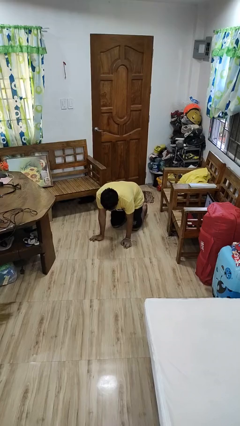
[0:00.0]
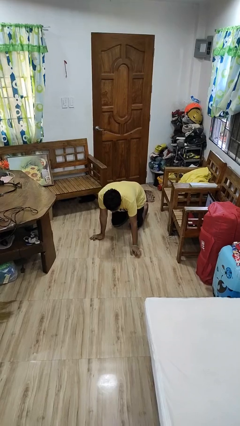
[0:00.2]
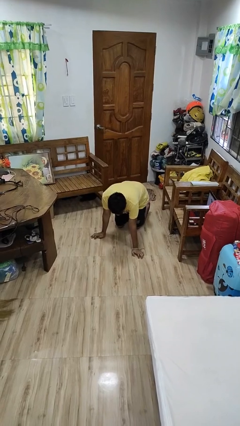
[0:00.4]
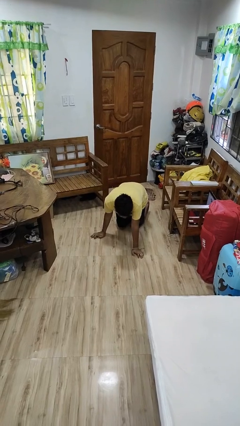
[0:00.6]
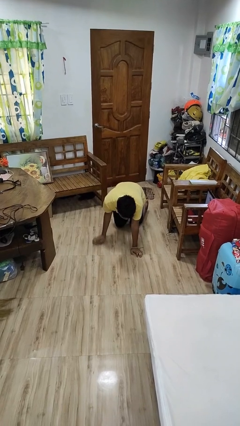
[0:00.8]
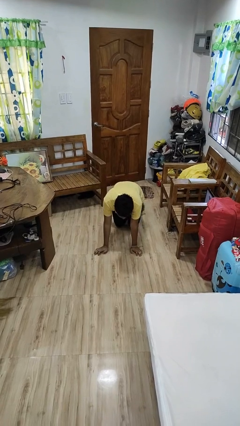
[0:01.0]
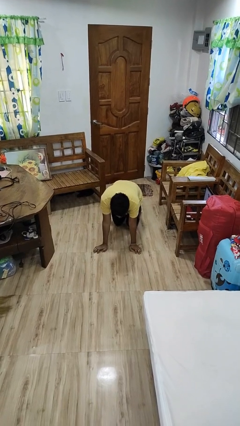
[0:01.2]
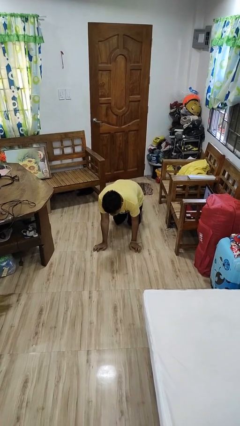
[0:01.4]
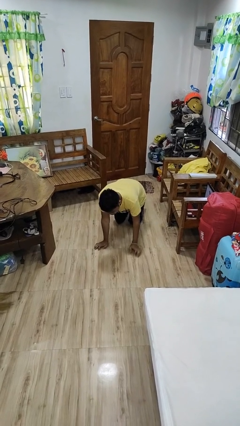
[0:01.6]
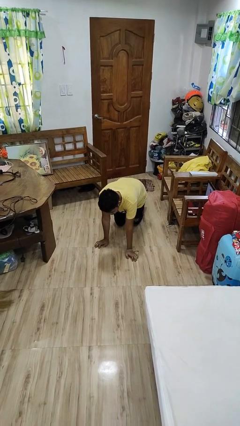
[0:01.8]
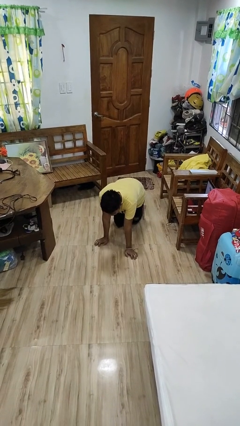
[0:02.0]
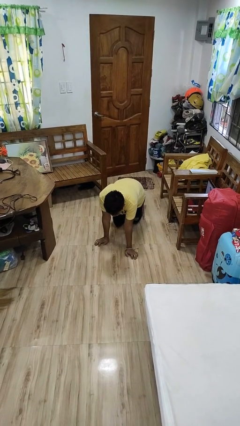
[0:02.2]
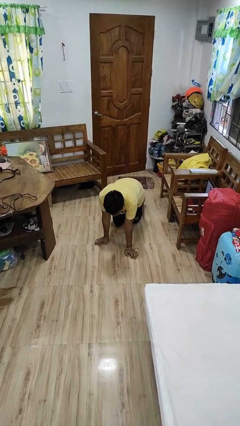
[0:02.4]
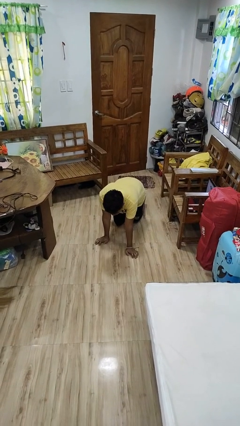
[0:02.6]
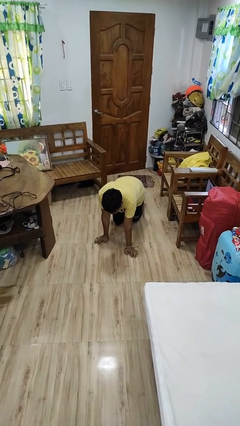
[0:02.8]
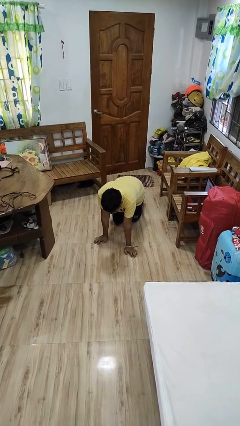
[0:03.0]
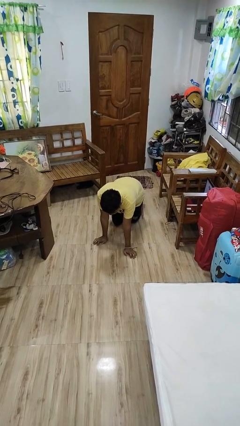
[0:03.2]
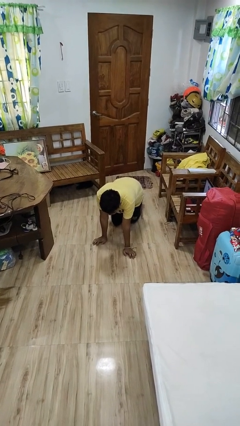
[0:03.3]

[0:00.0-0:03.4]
person crawls

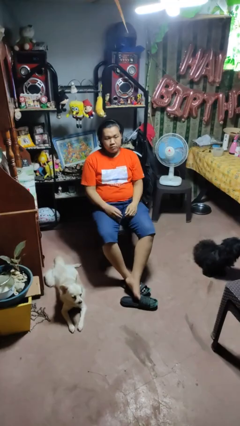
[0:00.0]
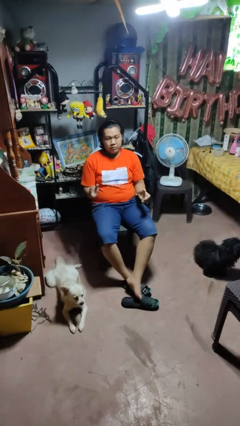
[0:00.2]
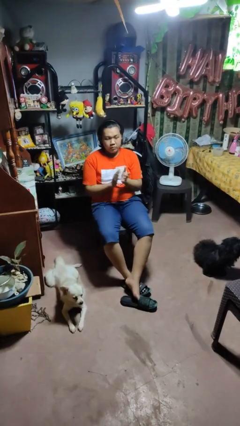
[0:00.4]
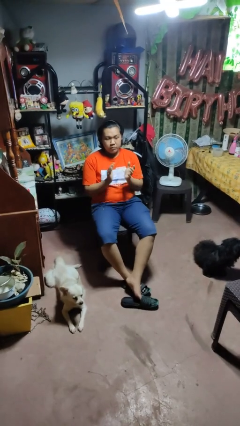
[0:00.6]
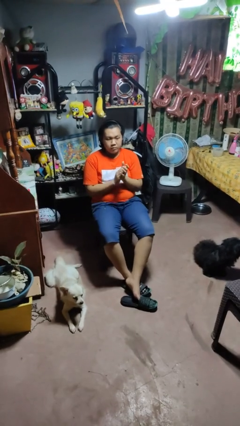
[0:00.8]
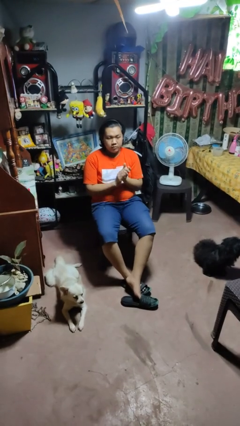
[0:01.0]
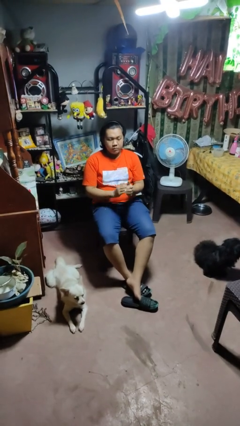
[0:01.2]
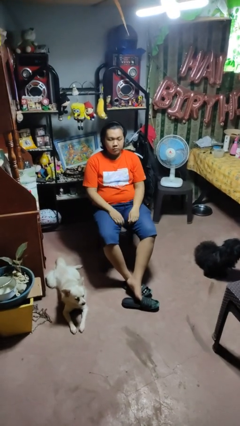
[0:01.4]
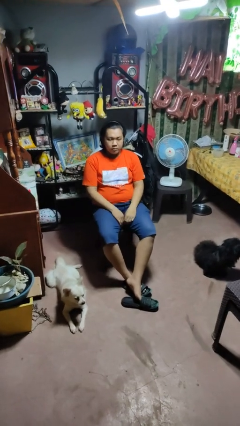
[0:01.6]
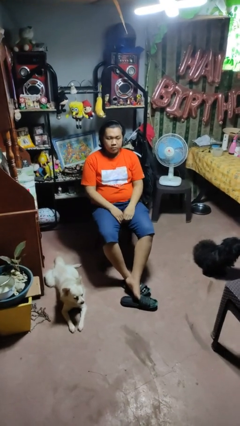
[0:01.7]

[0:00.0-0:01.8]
person claps hands

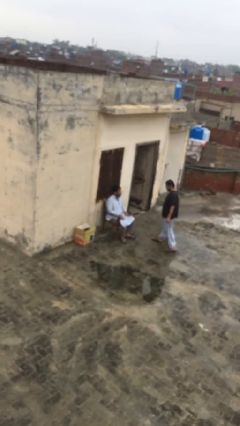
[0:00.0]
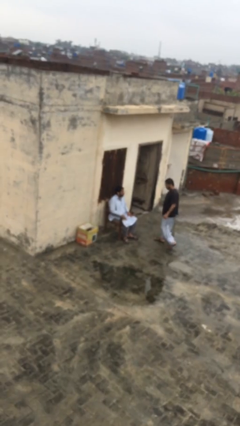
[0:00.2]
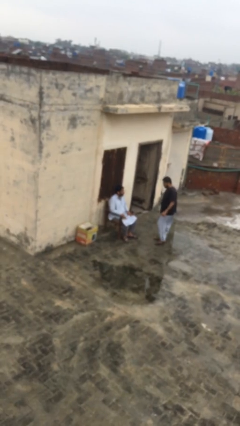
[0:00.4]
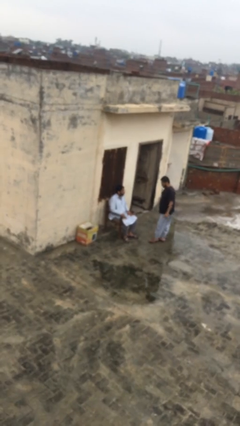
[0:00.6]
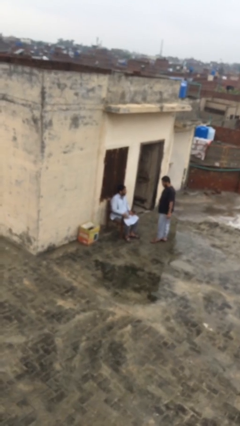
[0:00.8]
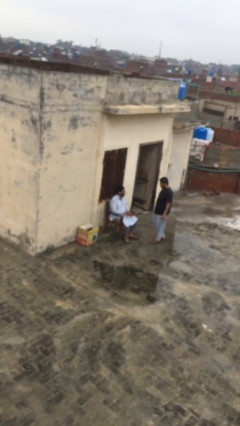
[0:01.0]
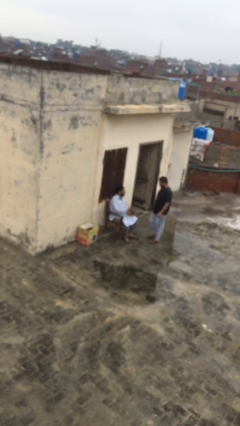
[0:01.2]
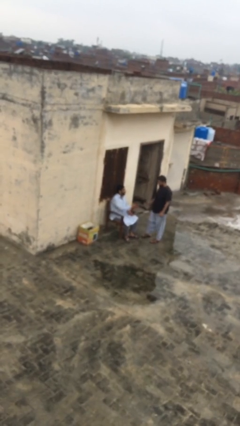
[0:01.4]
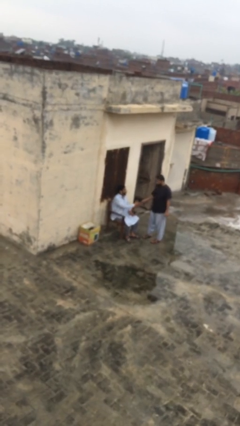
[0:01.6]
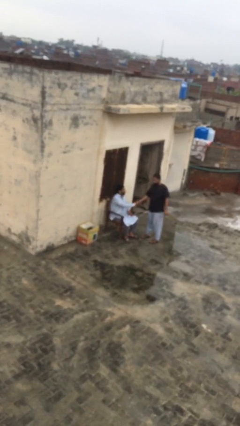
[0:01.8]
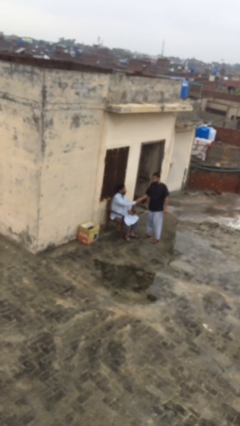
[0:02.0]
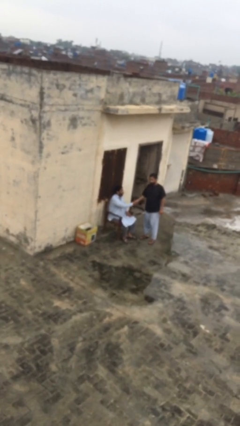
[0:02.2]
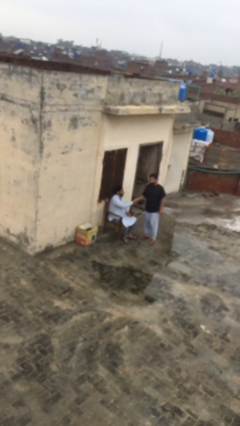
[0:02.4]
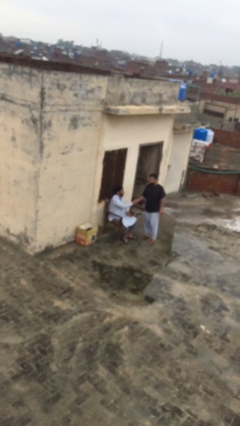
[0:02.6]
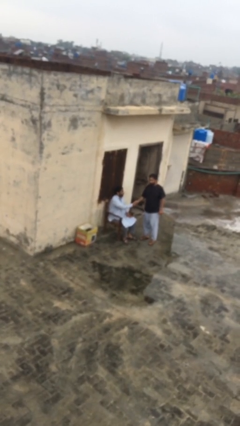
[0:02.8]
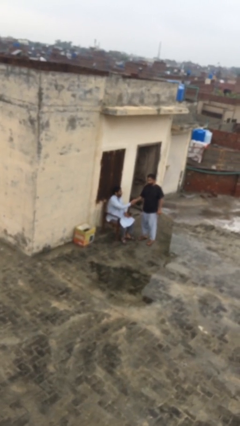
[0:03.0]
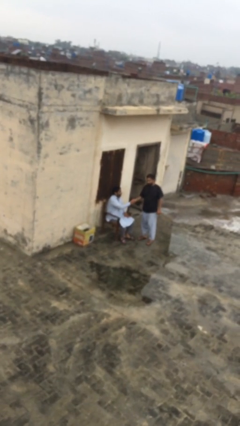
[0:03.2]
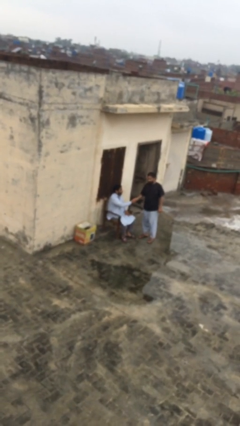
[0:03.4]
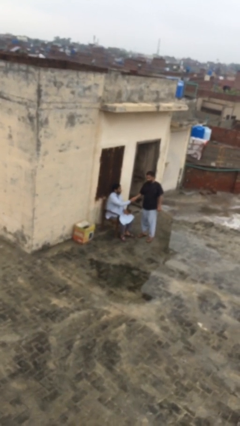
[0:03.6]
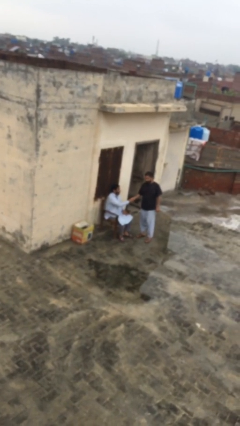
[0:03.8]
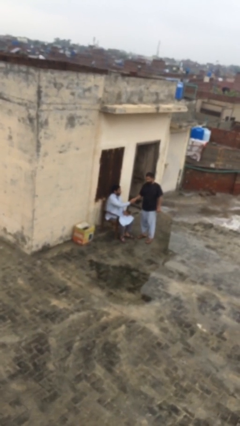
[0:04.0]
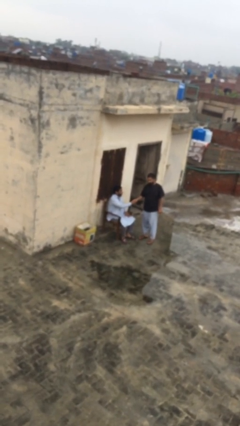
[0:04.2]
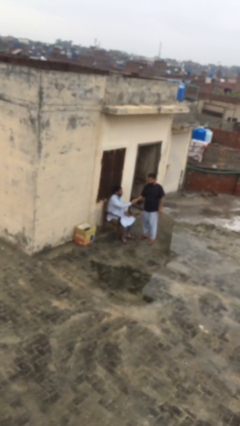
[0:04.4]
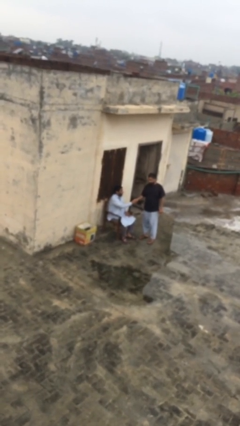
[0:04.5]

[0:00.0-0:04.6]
person shakes hand

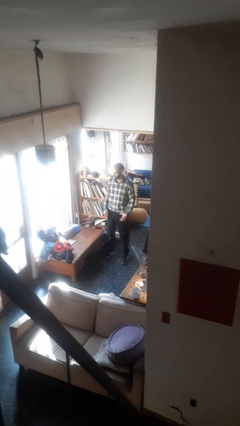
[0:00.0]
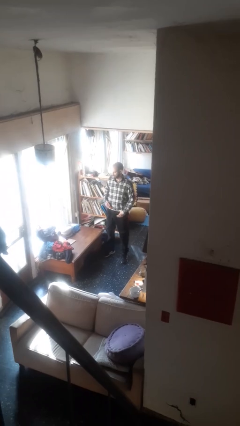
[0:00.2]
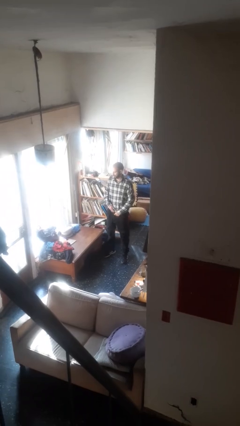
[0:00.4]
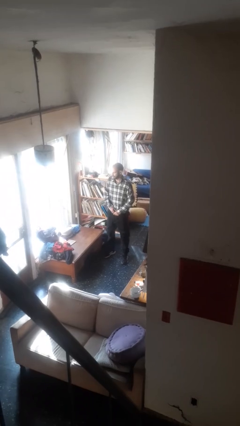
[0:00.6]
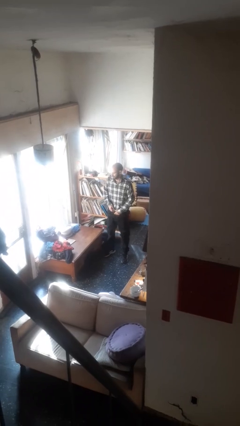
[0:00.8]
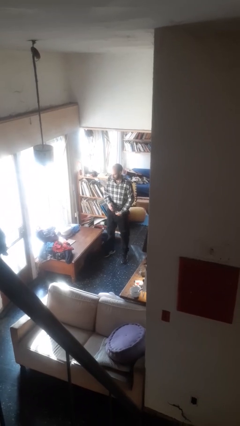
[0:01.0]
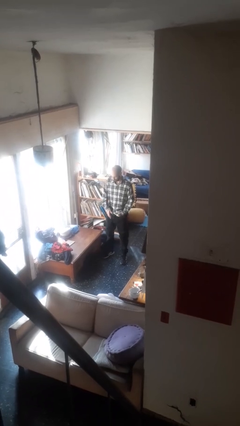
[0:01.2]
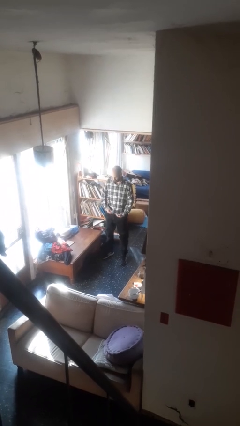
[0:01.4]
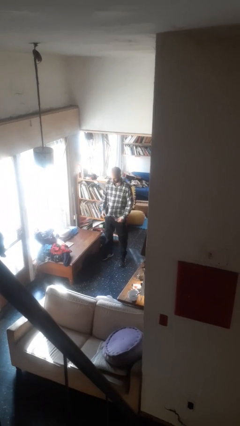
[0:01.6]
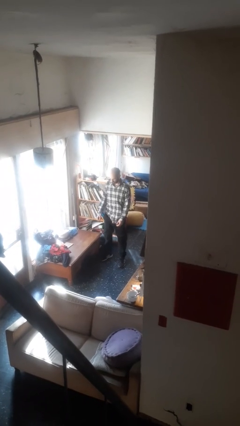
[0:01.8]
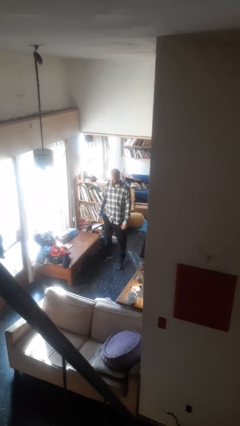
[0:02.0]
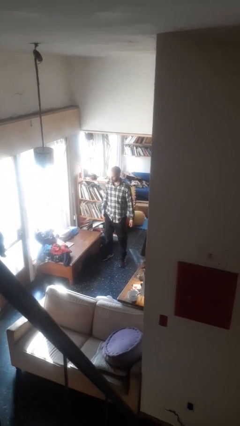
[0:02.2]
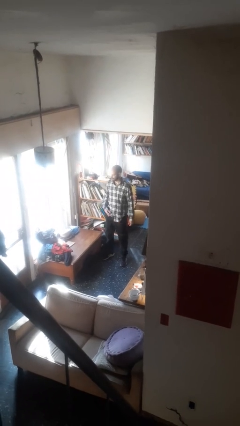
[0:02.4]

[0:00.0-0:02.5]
person untucks shirt

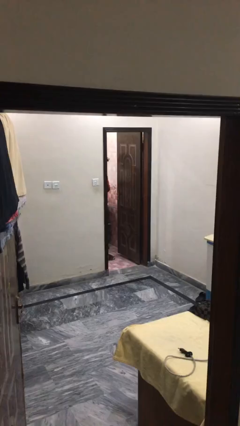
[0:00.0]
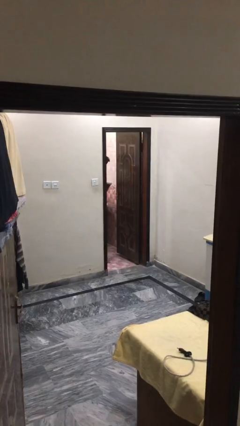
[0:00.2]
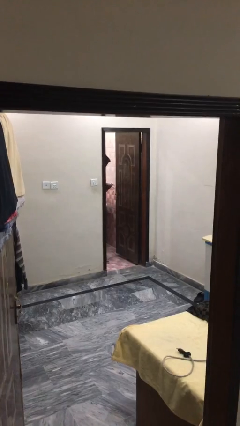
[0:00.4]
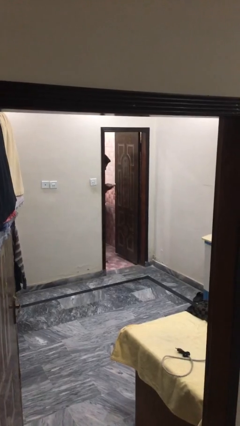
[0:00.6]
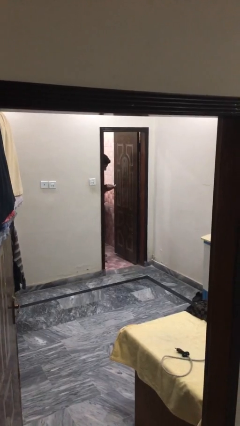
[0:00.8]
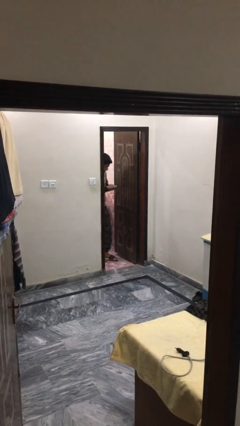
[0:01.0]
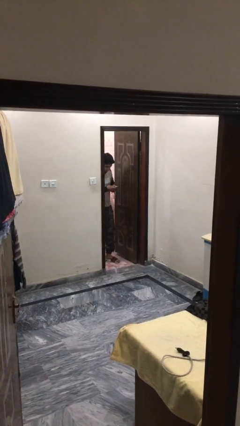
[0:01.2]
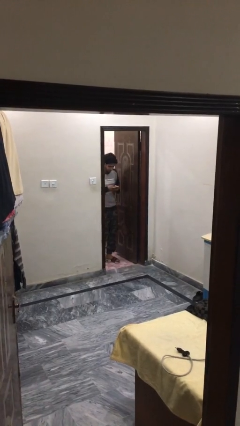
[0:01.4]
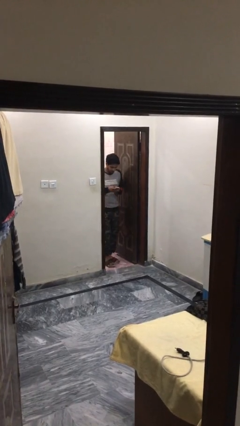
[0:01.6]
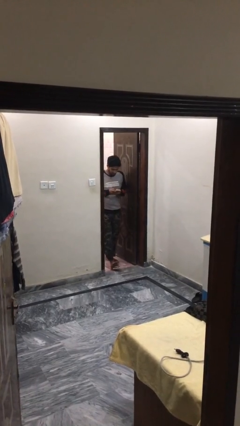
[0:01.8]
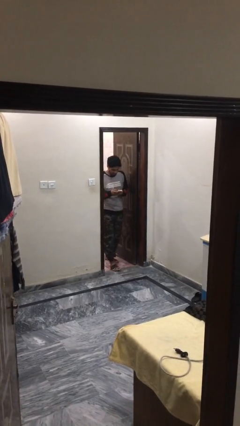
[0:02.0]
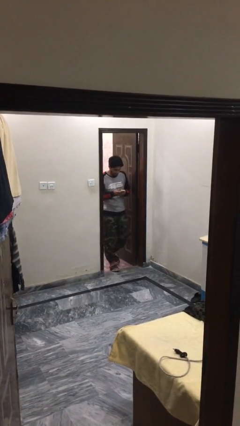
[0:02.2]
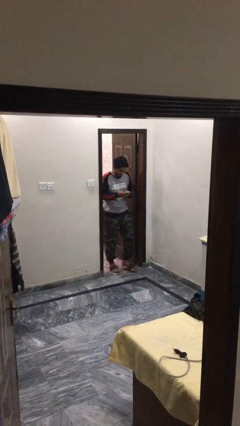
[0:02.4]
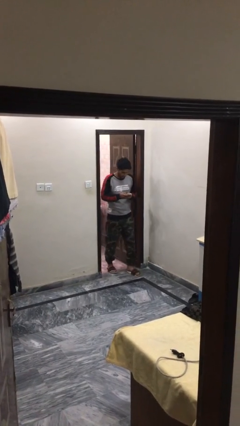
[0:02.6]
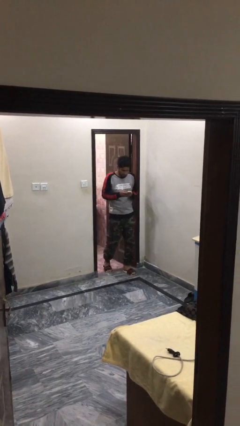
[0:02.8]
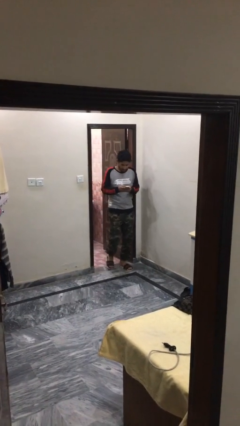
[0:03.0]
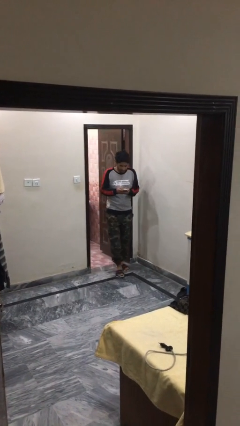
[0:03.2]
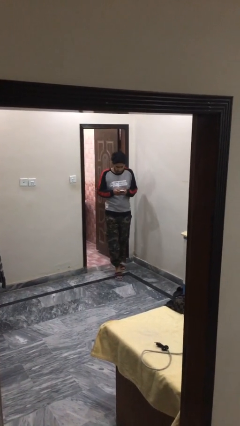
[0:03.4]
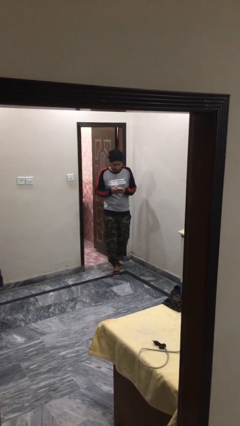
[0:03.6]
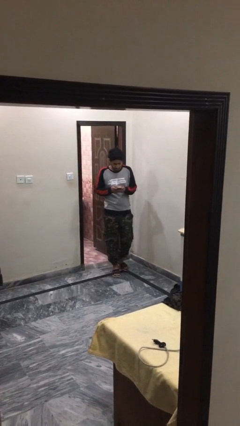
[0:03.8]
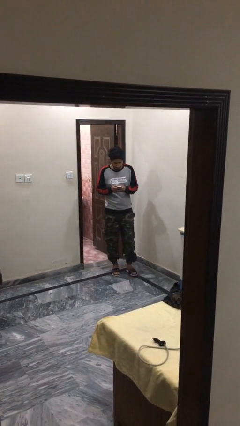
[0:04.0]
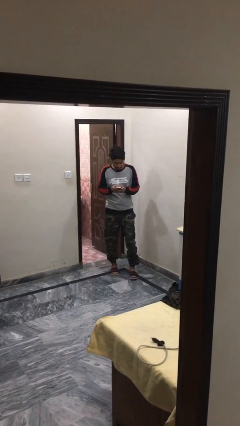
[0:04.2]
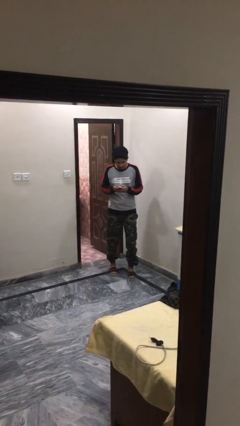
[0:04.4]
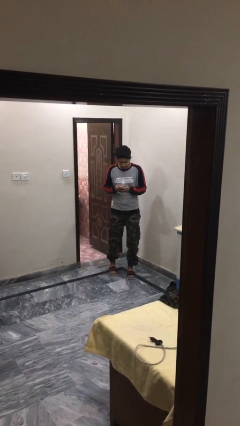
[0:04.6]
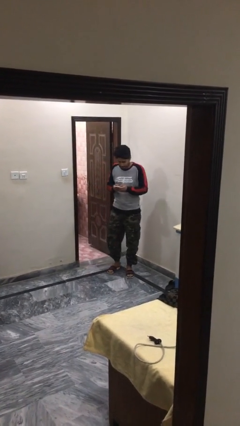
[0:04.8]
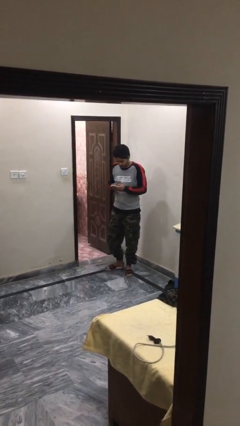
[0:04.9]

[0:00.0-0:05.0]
person exits scene through structure

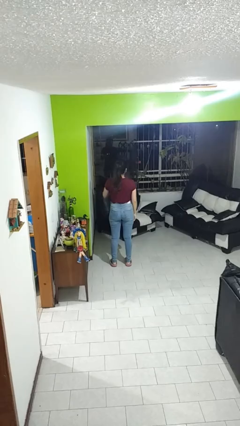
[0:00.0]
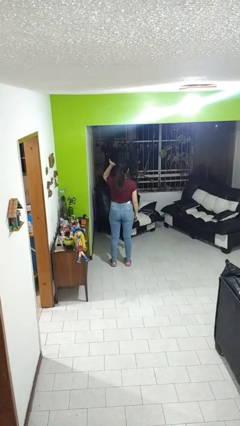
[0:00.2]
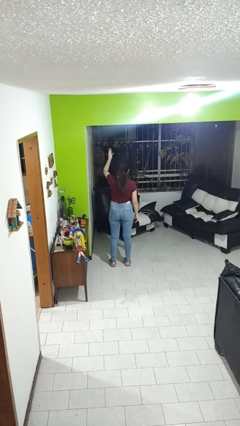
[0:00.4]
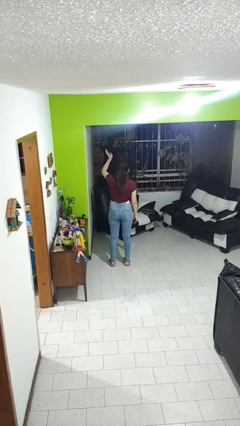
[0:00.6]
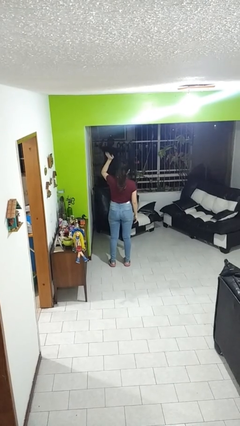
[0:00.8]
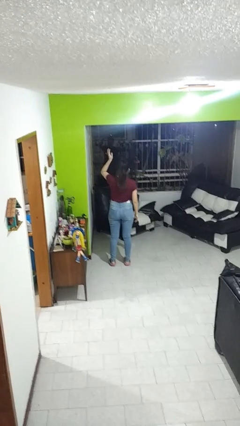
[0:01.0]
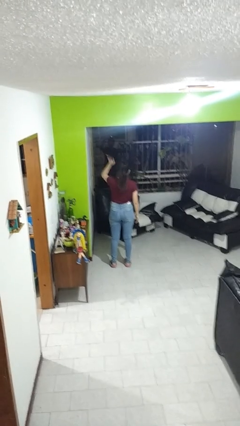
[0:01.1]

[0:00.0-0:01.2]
person waves at person
